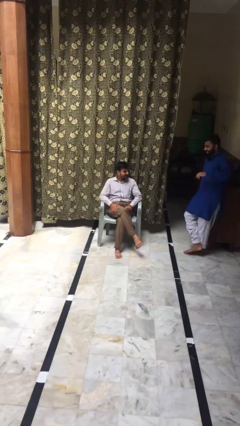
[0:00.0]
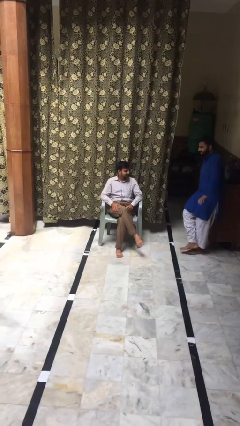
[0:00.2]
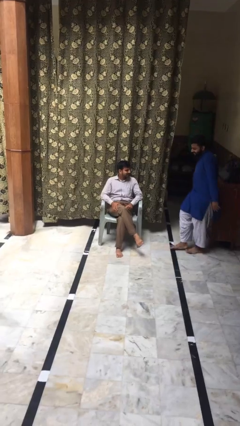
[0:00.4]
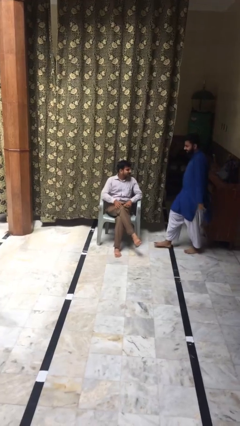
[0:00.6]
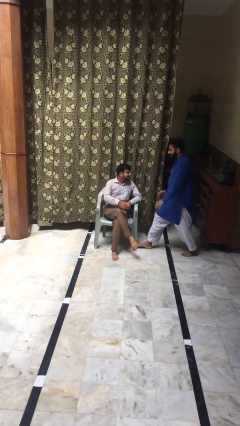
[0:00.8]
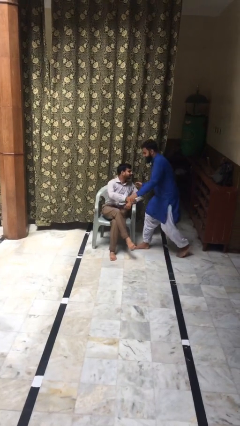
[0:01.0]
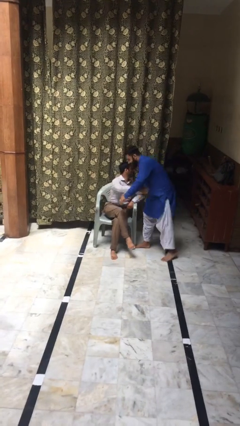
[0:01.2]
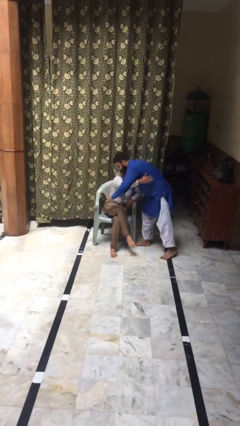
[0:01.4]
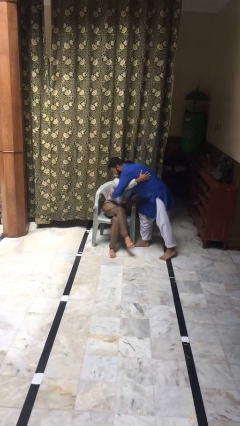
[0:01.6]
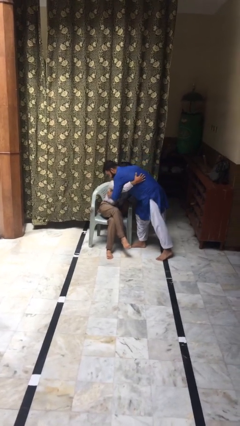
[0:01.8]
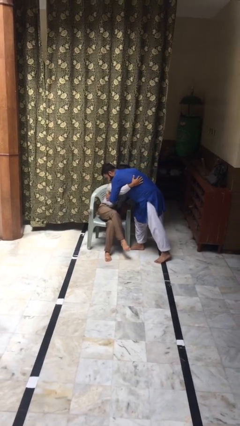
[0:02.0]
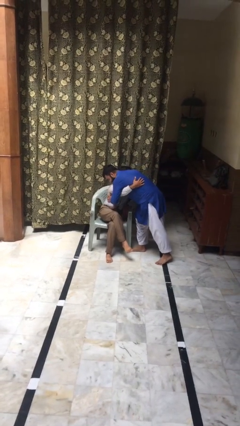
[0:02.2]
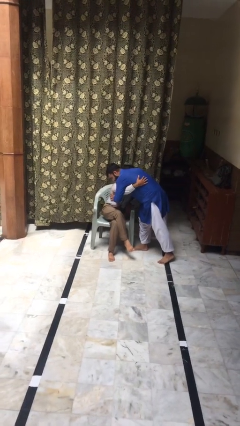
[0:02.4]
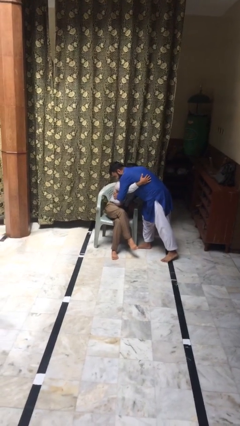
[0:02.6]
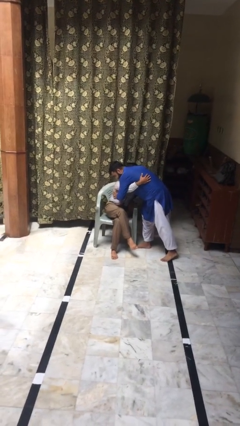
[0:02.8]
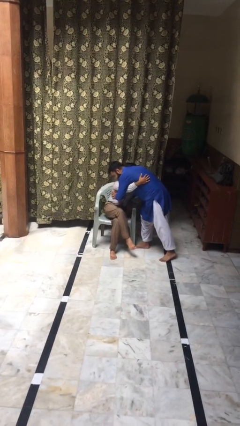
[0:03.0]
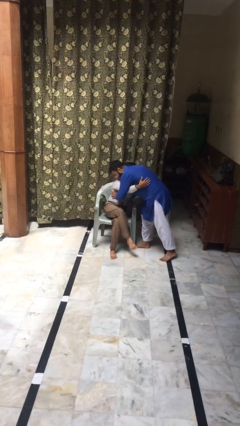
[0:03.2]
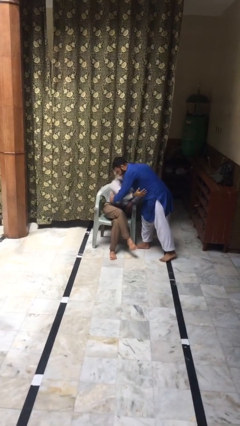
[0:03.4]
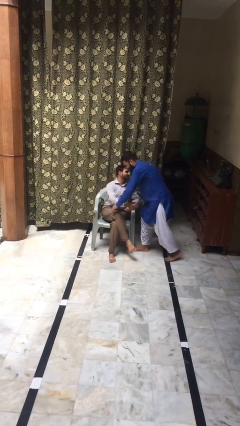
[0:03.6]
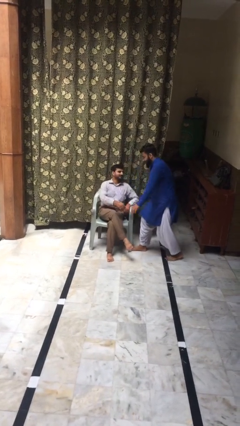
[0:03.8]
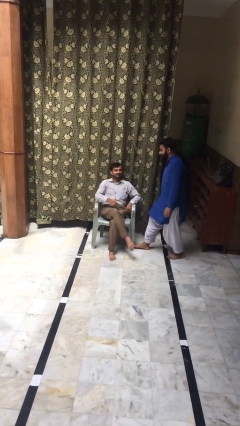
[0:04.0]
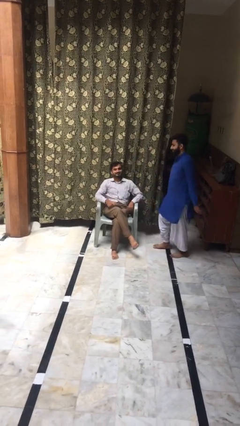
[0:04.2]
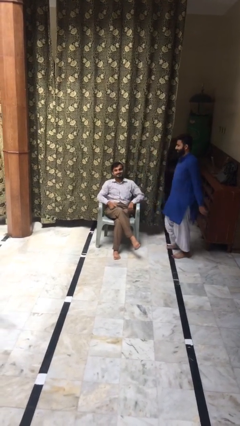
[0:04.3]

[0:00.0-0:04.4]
person embraces person

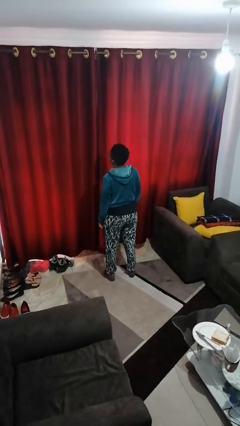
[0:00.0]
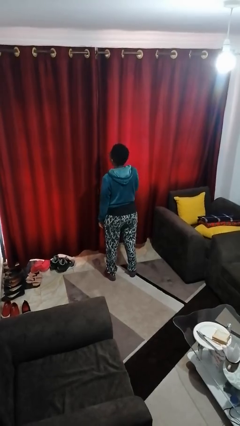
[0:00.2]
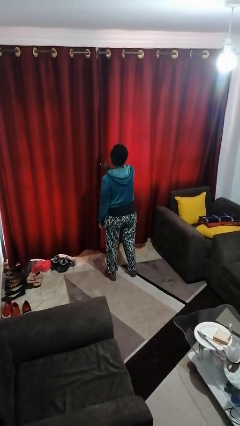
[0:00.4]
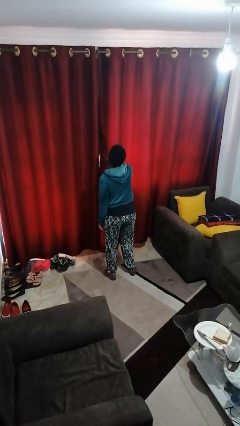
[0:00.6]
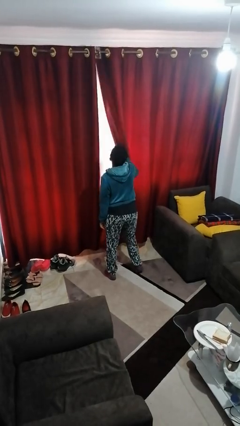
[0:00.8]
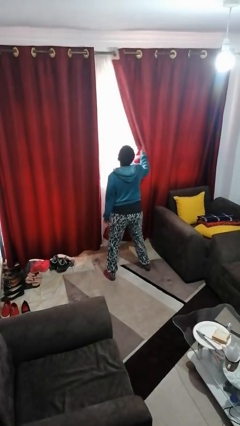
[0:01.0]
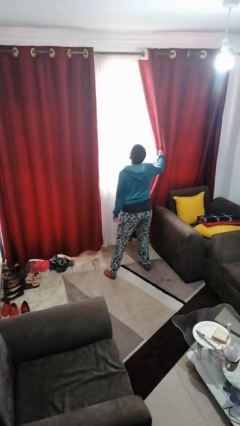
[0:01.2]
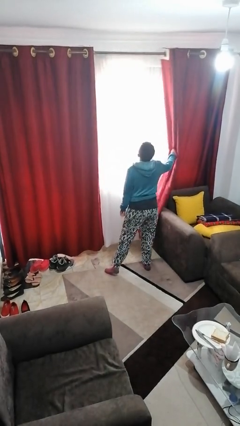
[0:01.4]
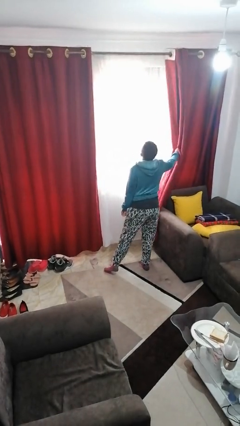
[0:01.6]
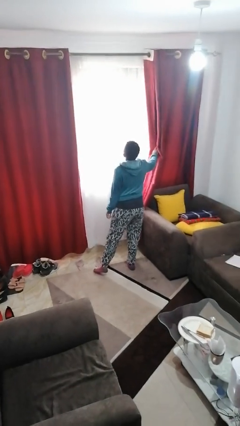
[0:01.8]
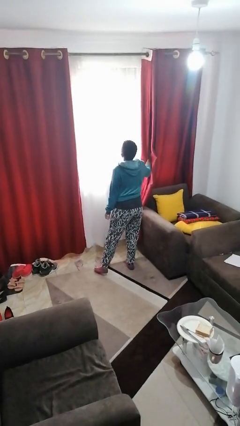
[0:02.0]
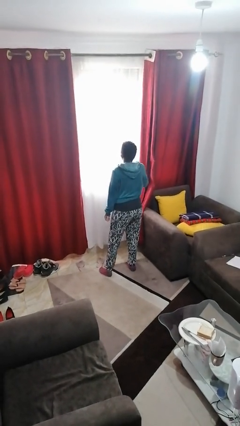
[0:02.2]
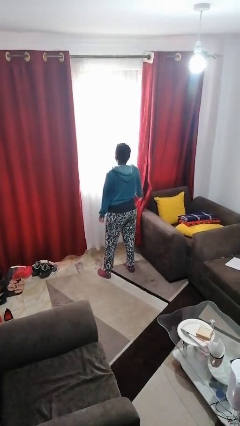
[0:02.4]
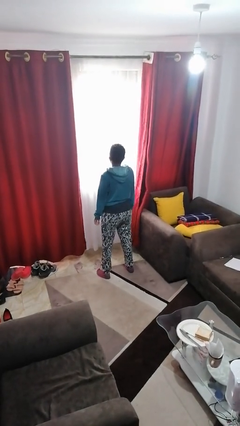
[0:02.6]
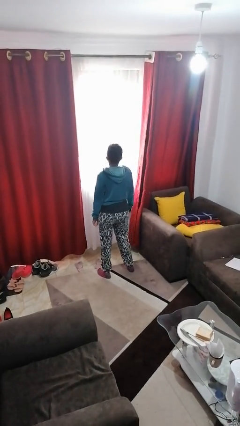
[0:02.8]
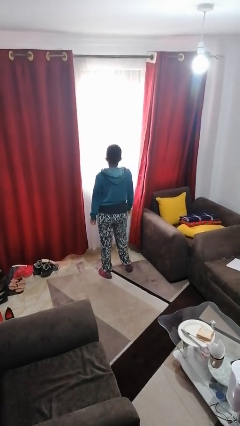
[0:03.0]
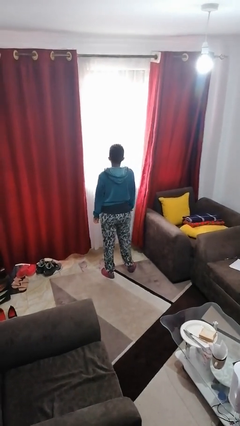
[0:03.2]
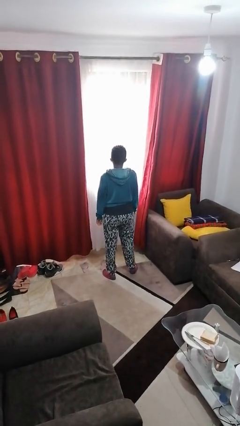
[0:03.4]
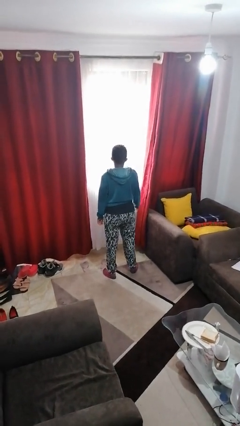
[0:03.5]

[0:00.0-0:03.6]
person opens curtains

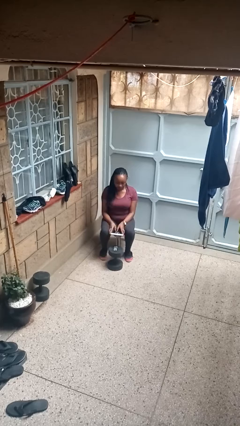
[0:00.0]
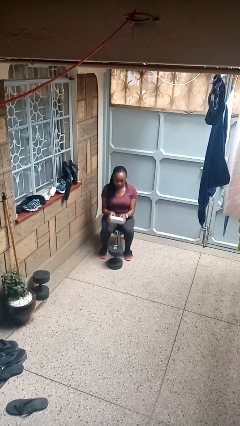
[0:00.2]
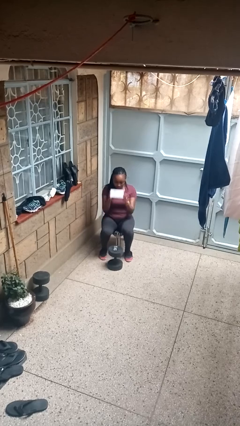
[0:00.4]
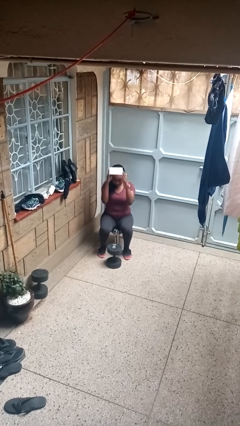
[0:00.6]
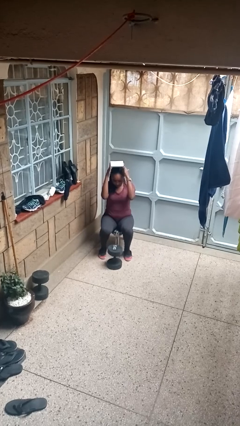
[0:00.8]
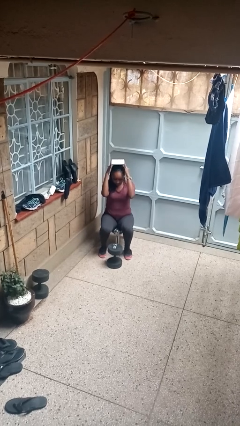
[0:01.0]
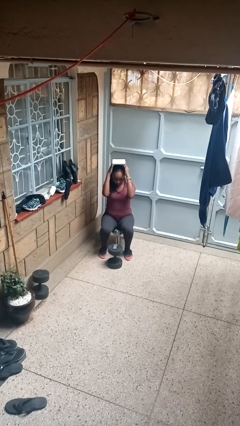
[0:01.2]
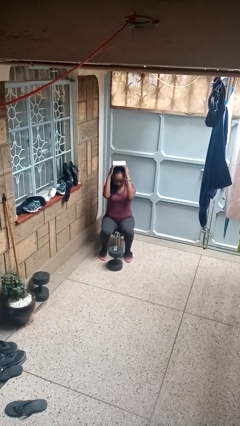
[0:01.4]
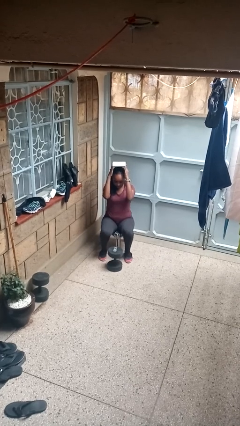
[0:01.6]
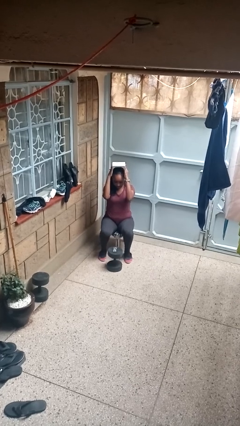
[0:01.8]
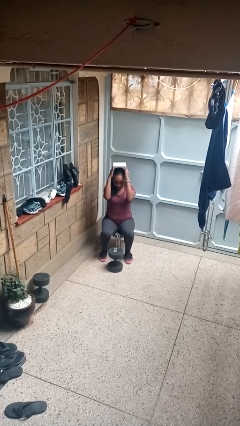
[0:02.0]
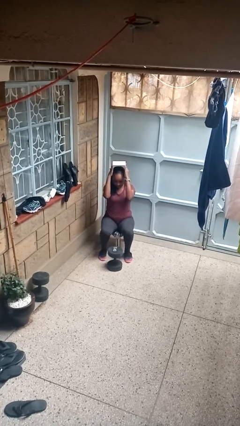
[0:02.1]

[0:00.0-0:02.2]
person holds object above head

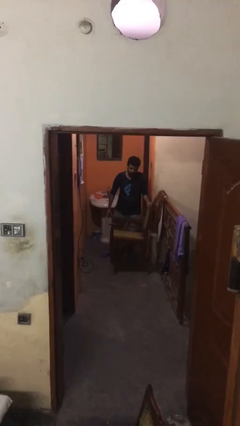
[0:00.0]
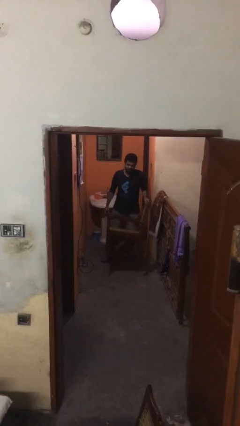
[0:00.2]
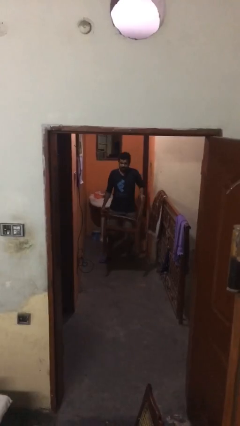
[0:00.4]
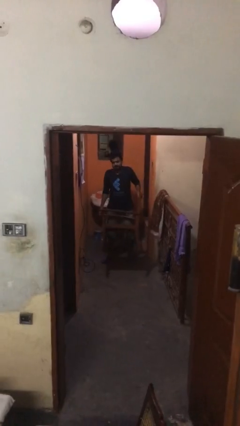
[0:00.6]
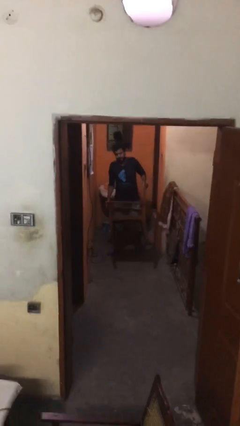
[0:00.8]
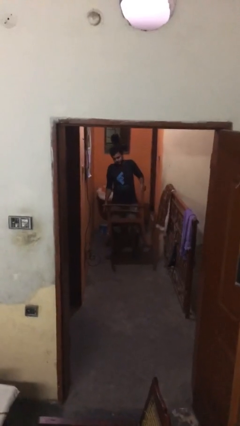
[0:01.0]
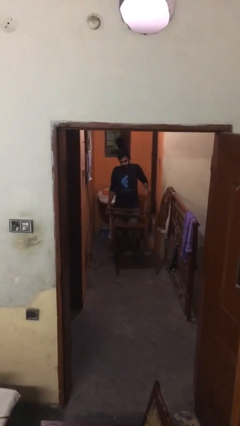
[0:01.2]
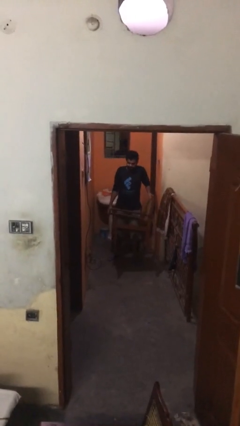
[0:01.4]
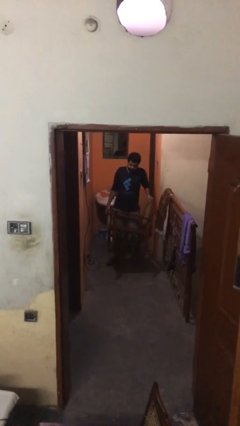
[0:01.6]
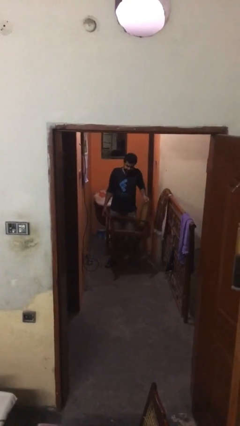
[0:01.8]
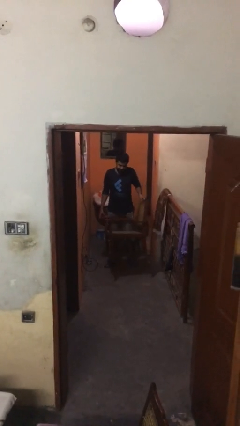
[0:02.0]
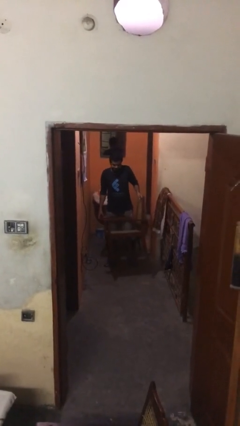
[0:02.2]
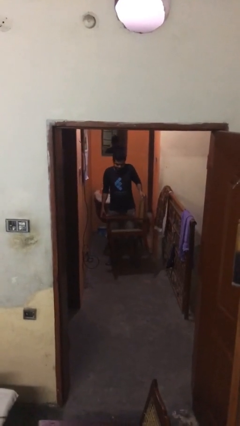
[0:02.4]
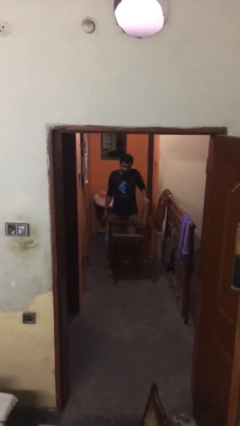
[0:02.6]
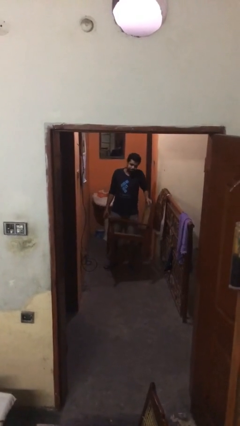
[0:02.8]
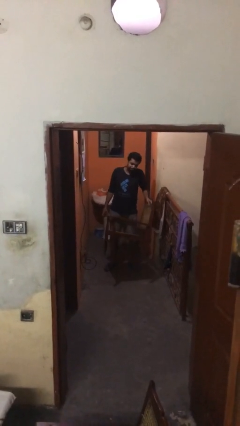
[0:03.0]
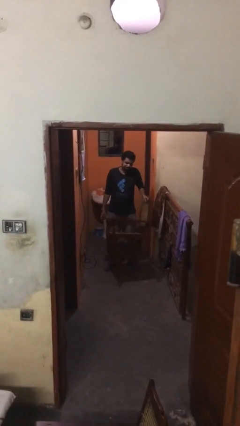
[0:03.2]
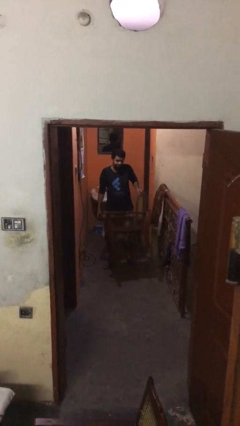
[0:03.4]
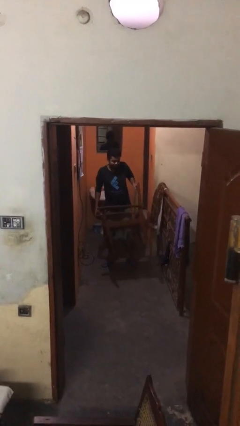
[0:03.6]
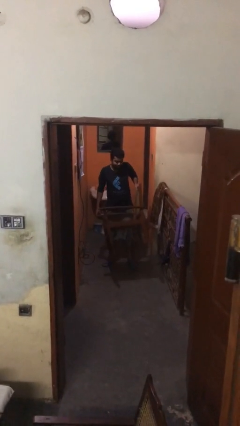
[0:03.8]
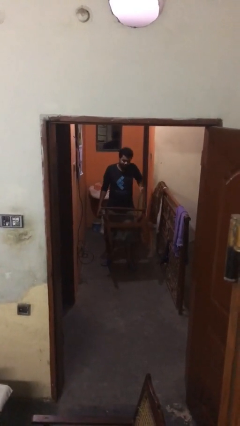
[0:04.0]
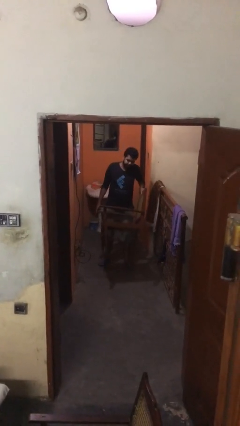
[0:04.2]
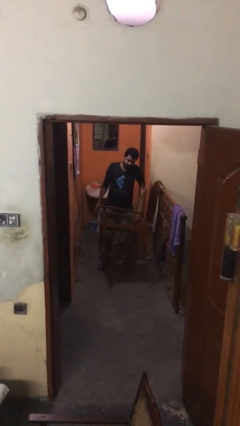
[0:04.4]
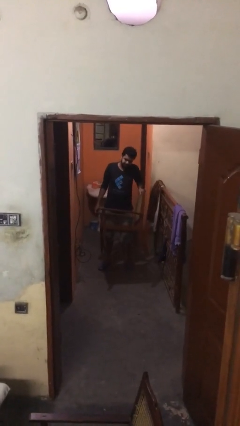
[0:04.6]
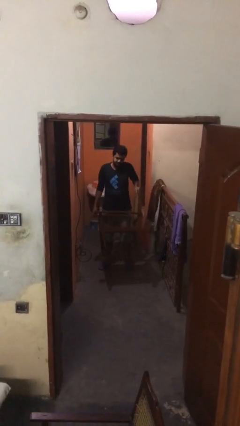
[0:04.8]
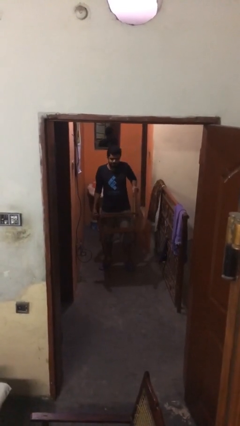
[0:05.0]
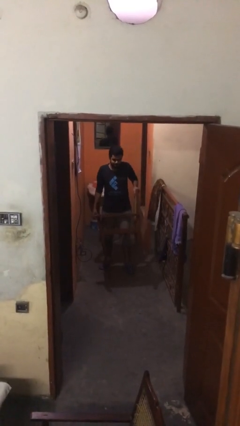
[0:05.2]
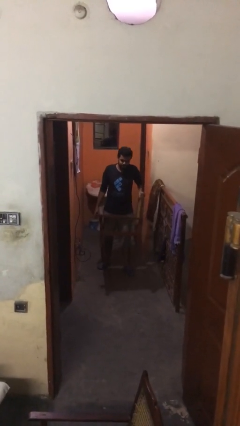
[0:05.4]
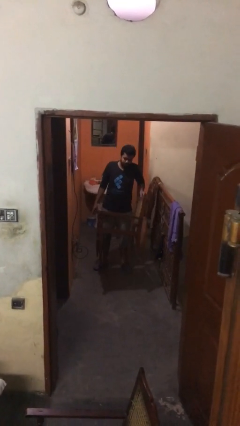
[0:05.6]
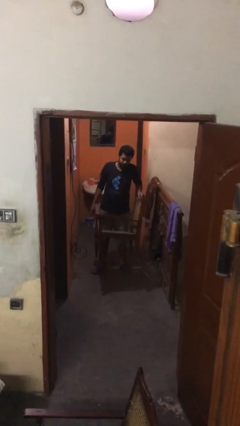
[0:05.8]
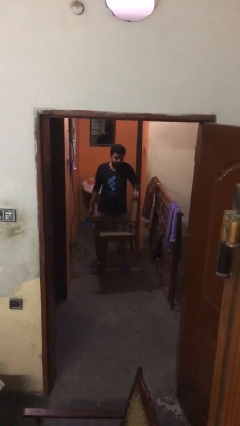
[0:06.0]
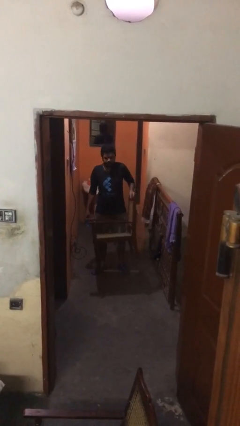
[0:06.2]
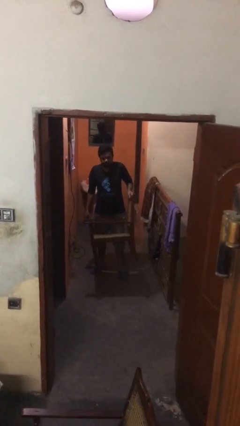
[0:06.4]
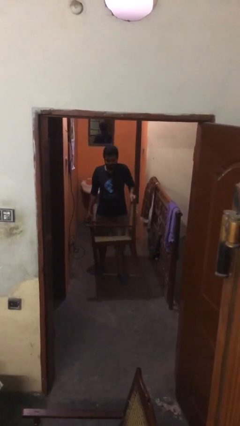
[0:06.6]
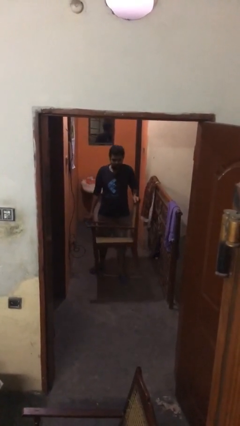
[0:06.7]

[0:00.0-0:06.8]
person carries heavy object

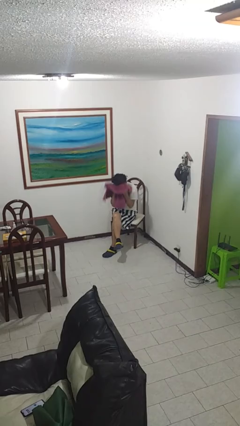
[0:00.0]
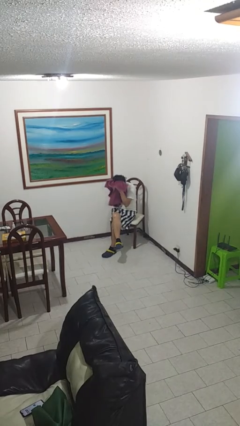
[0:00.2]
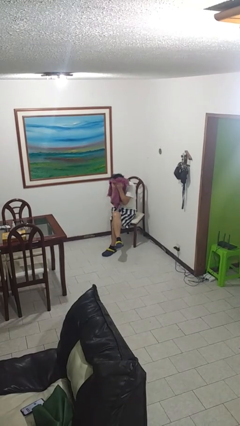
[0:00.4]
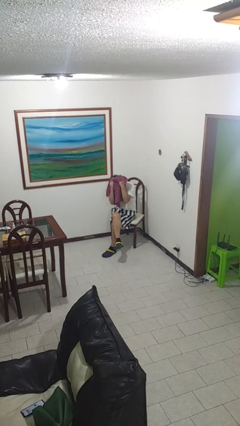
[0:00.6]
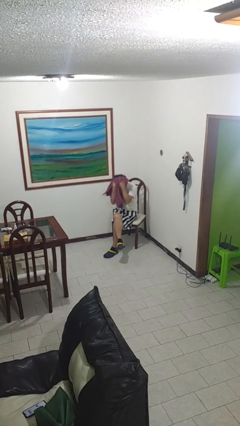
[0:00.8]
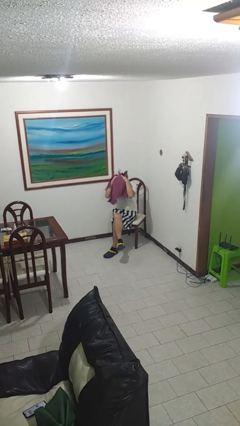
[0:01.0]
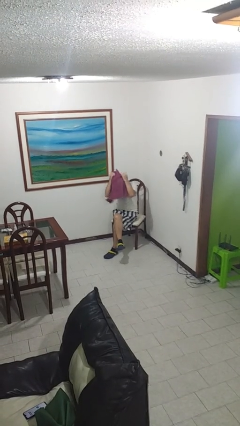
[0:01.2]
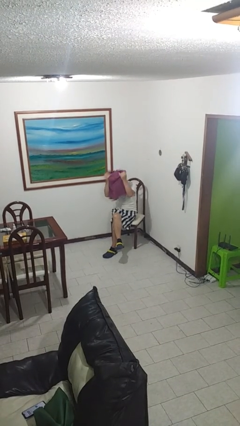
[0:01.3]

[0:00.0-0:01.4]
person dries hair with towel
